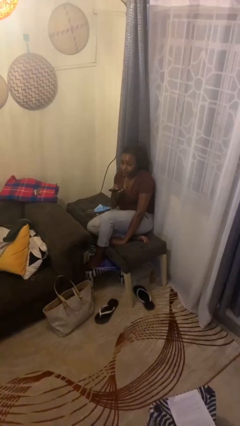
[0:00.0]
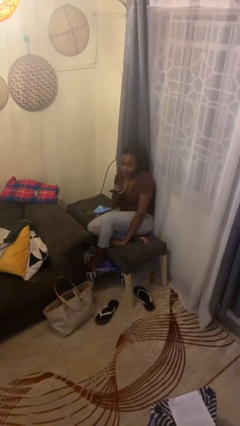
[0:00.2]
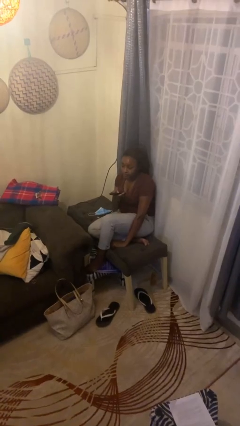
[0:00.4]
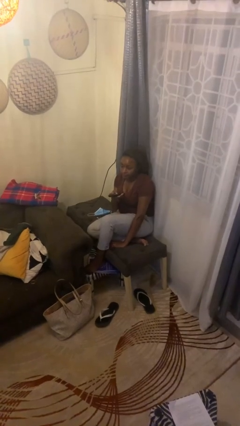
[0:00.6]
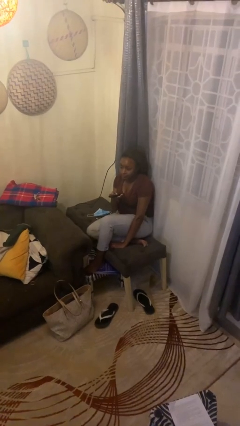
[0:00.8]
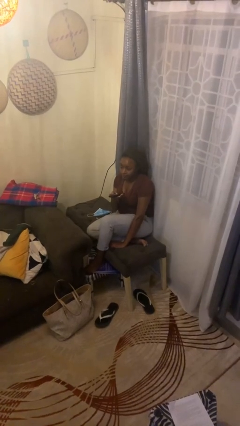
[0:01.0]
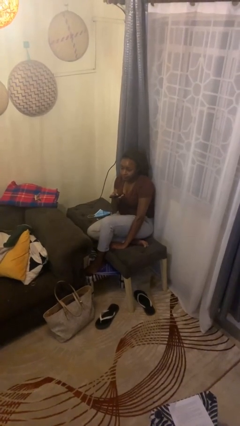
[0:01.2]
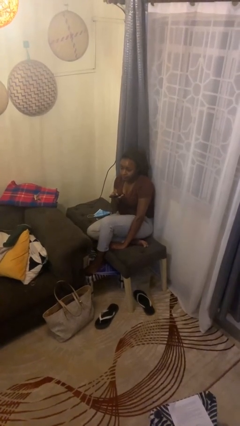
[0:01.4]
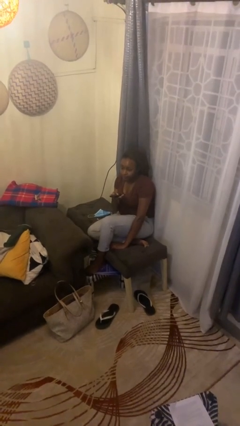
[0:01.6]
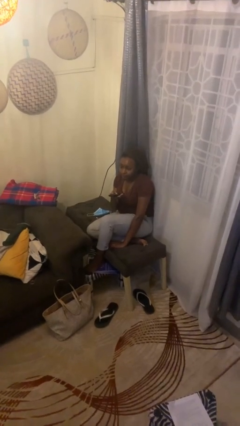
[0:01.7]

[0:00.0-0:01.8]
person uses television remote

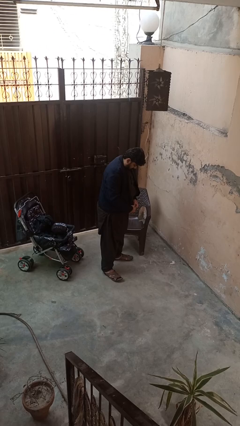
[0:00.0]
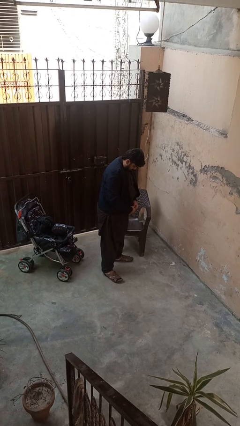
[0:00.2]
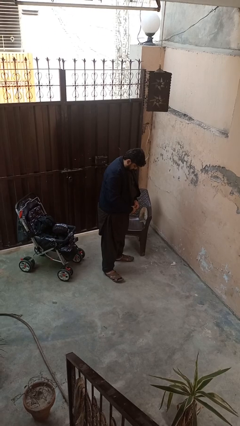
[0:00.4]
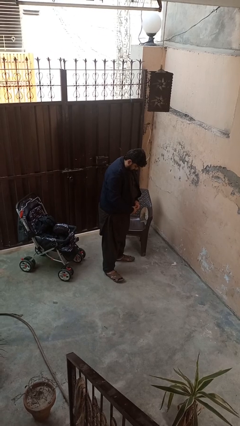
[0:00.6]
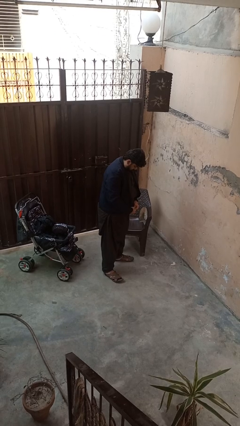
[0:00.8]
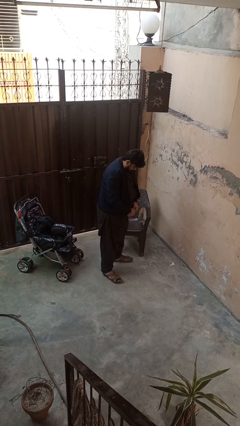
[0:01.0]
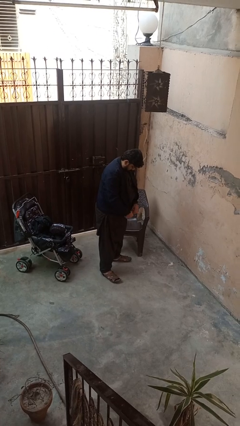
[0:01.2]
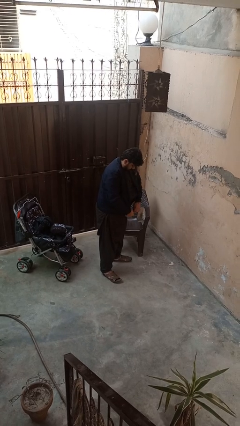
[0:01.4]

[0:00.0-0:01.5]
person zips up jacket

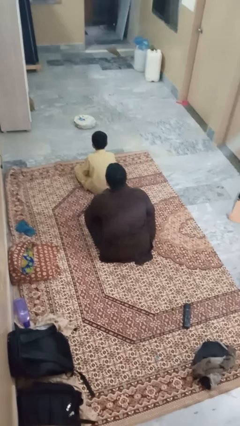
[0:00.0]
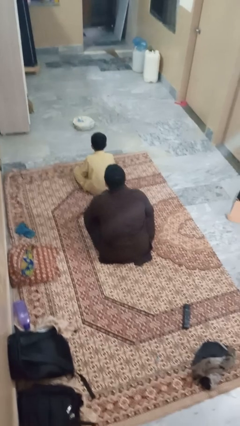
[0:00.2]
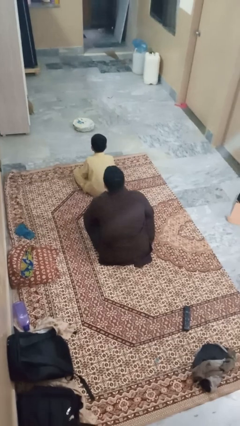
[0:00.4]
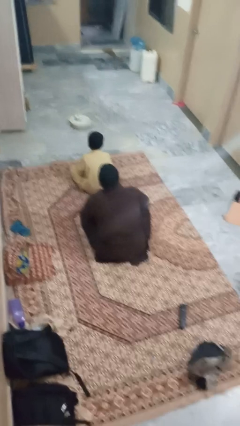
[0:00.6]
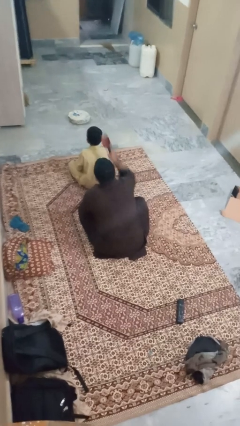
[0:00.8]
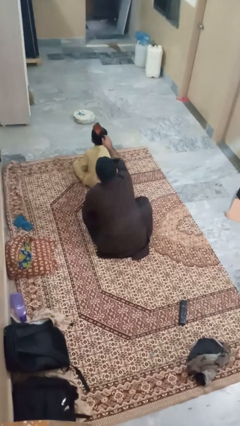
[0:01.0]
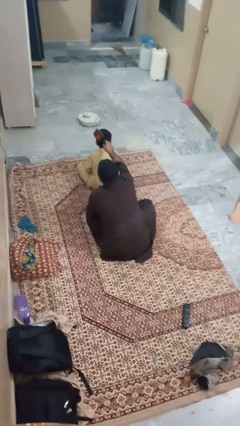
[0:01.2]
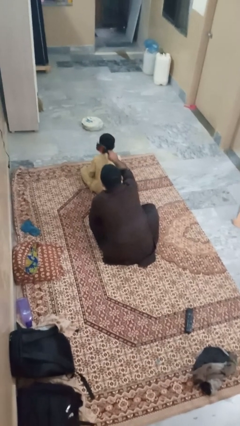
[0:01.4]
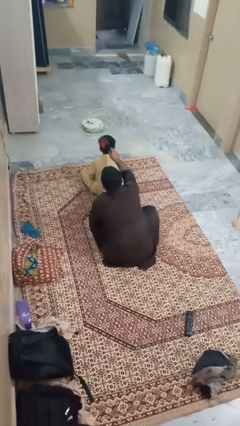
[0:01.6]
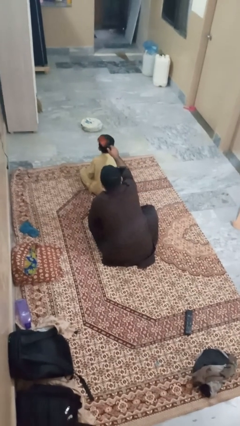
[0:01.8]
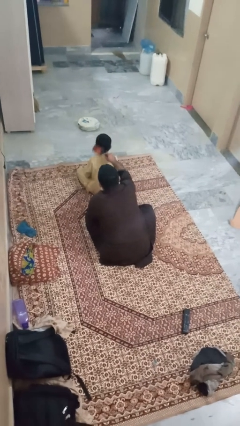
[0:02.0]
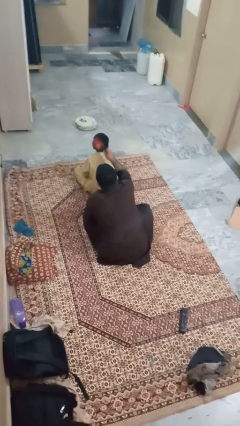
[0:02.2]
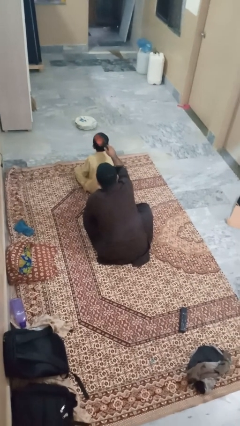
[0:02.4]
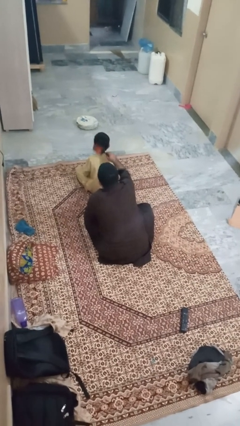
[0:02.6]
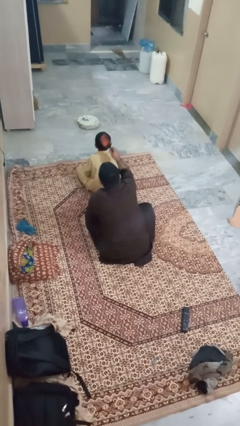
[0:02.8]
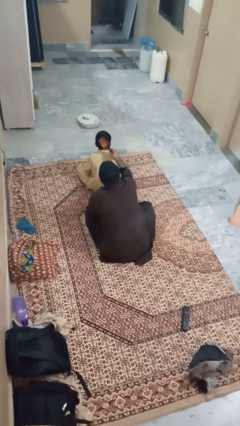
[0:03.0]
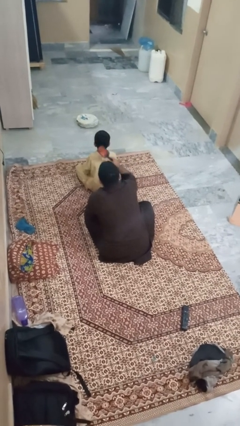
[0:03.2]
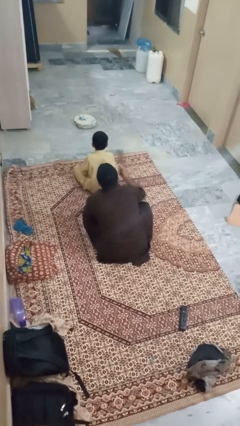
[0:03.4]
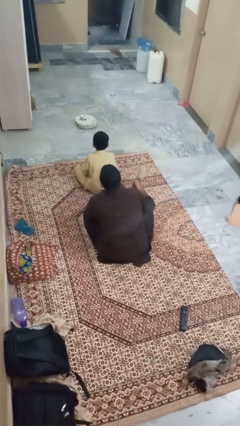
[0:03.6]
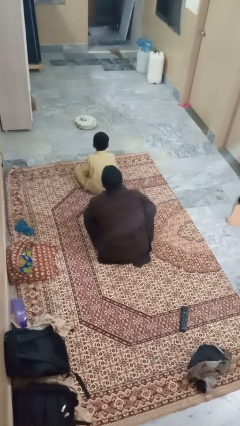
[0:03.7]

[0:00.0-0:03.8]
person brushes hair of person

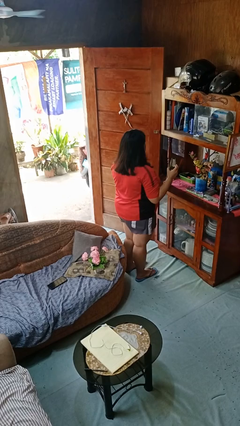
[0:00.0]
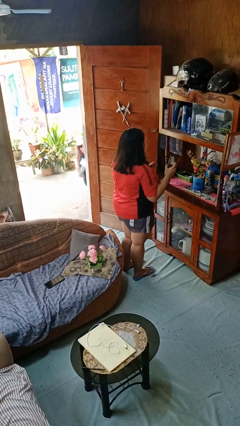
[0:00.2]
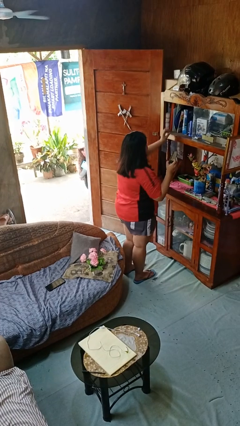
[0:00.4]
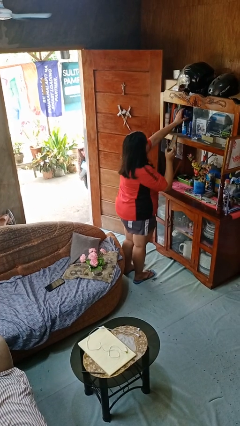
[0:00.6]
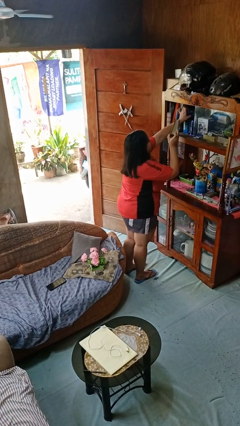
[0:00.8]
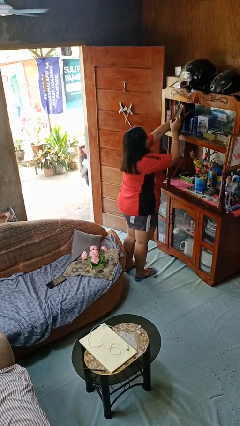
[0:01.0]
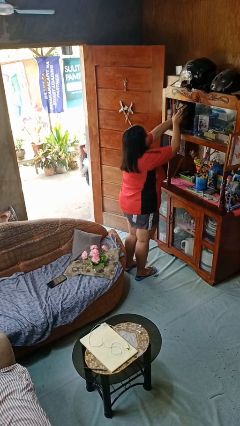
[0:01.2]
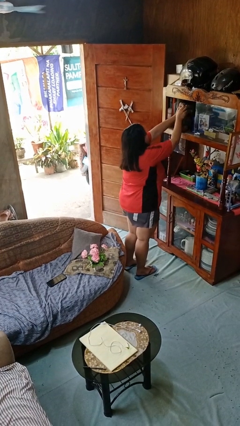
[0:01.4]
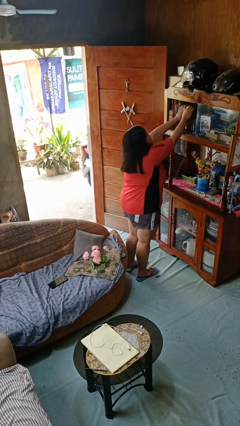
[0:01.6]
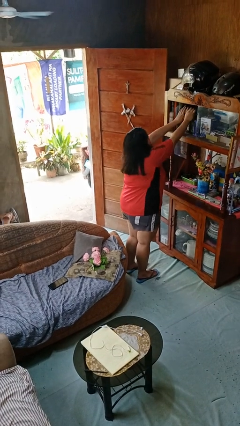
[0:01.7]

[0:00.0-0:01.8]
person puts down object on shelf

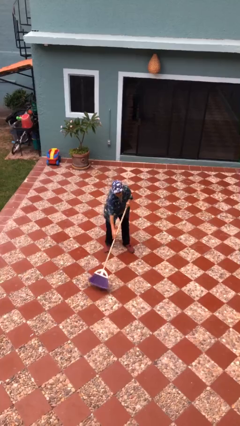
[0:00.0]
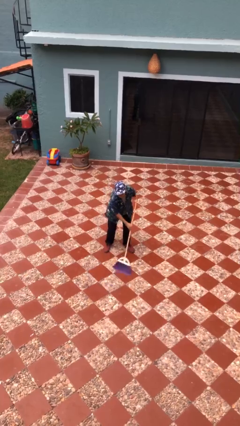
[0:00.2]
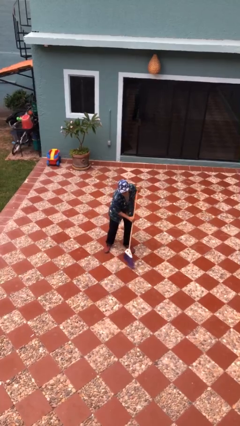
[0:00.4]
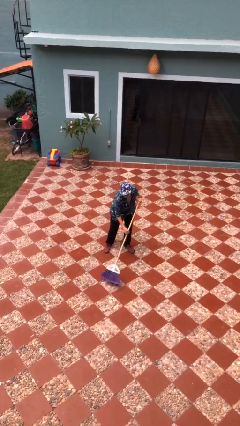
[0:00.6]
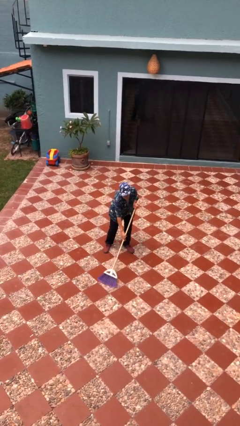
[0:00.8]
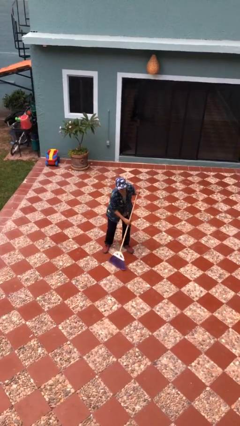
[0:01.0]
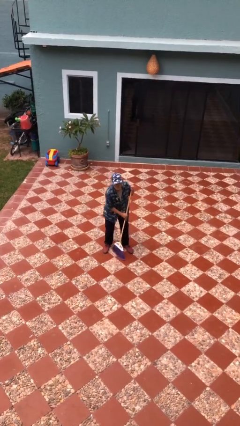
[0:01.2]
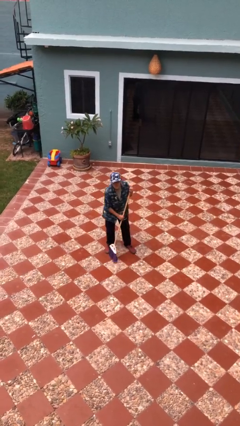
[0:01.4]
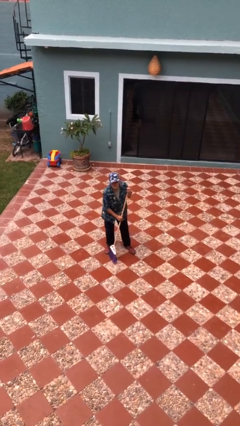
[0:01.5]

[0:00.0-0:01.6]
person sweeps floor

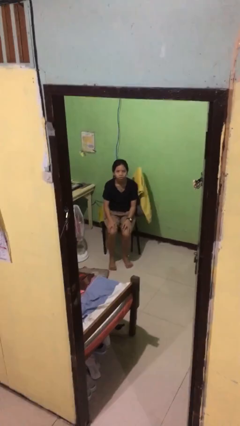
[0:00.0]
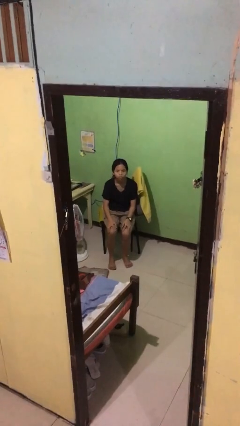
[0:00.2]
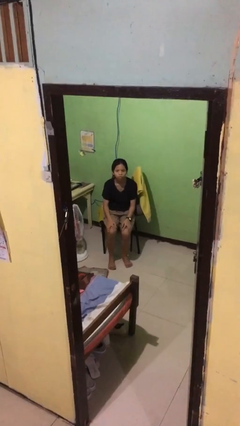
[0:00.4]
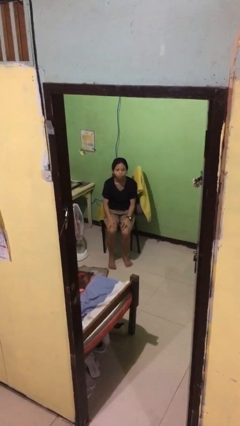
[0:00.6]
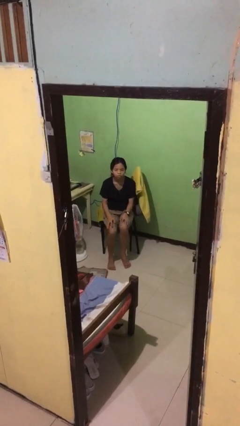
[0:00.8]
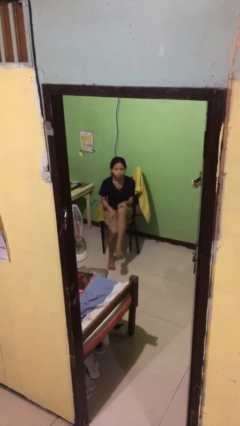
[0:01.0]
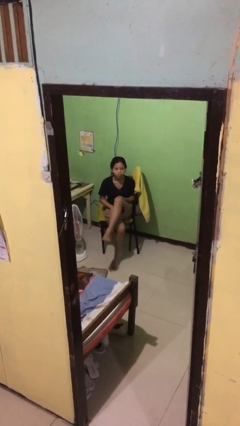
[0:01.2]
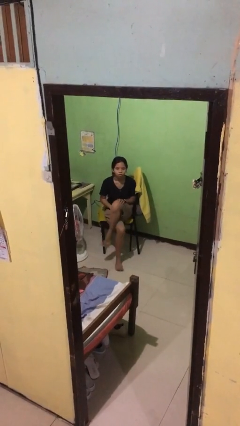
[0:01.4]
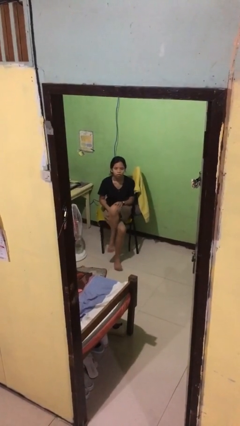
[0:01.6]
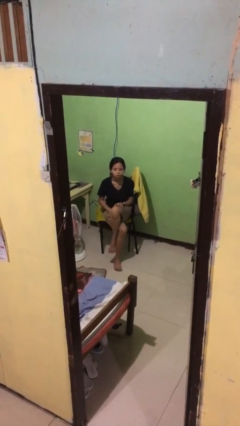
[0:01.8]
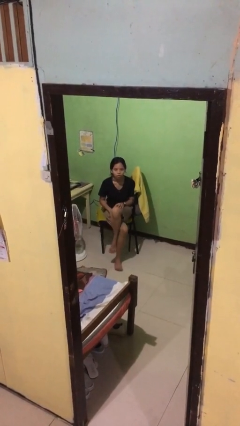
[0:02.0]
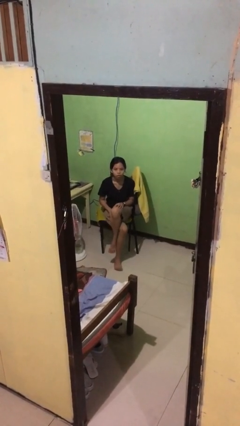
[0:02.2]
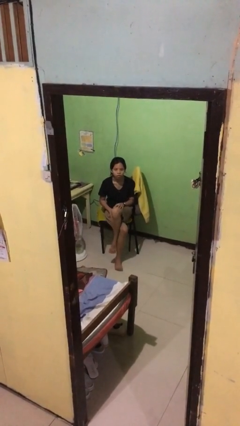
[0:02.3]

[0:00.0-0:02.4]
person crosses legs

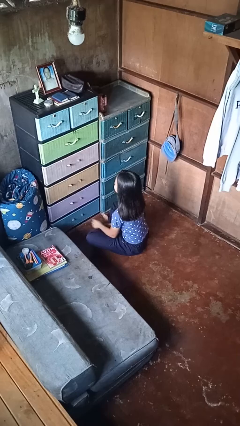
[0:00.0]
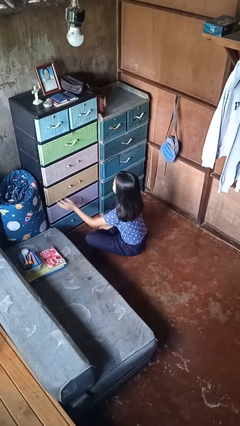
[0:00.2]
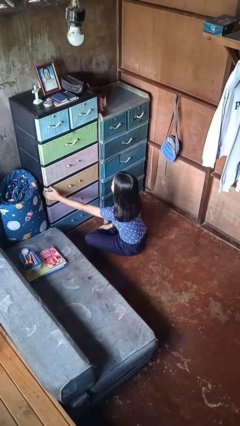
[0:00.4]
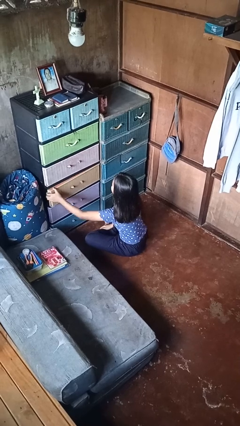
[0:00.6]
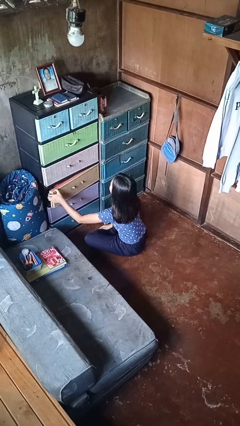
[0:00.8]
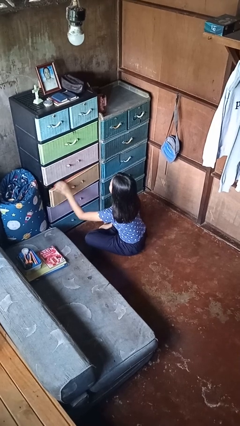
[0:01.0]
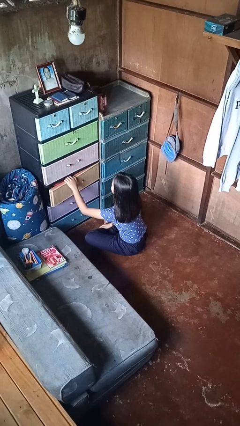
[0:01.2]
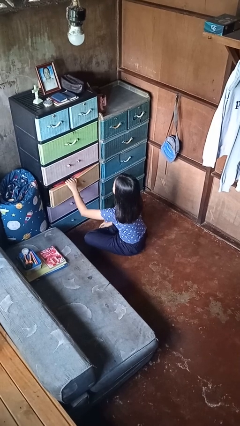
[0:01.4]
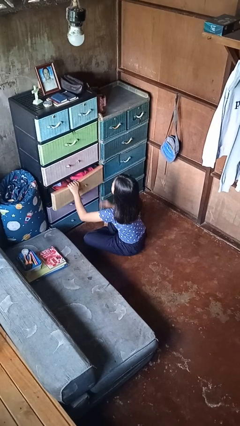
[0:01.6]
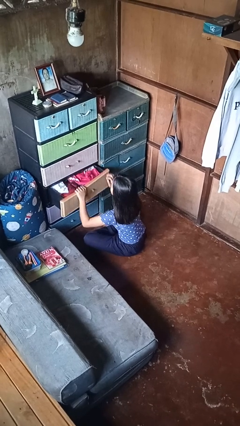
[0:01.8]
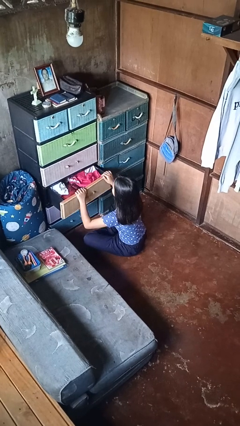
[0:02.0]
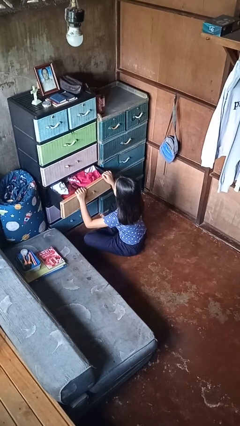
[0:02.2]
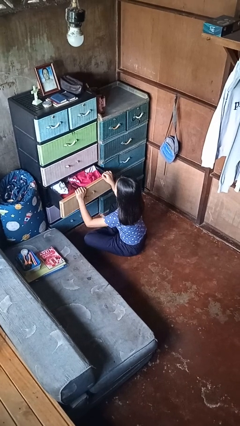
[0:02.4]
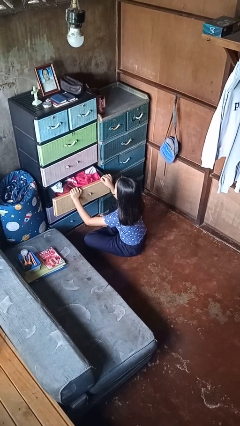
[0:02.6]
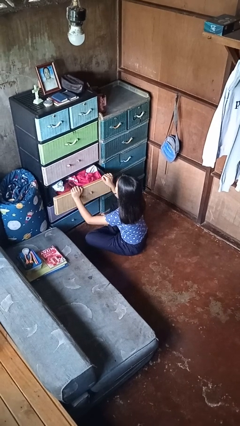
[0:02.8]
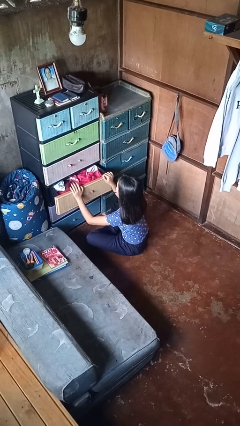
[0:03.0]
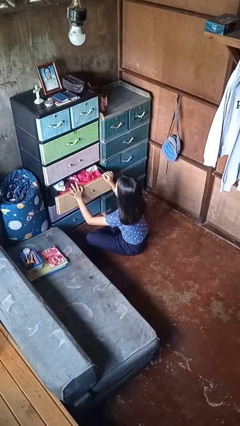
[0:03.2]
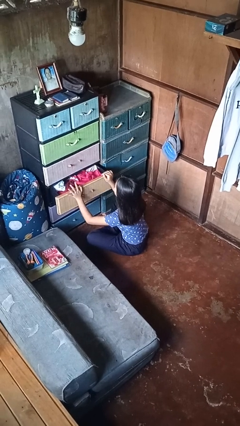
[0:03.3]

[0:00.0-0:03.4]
person opens dresser drawer

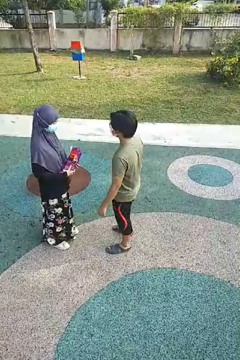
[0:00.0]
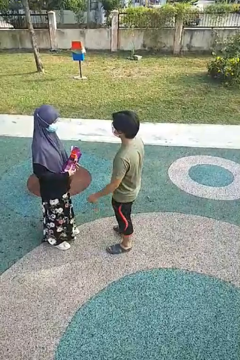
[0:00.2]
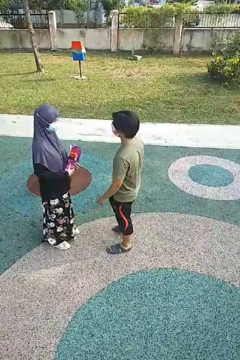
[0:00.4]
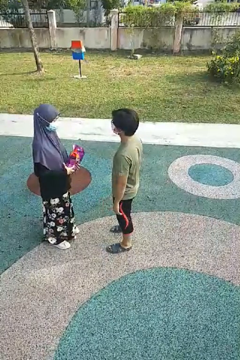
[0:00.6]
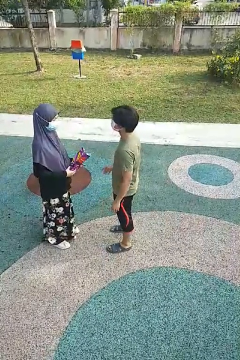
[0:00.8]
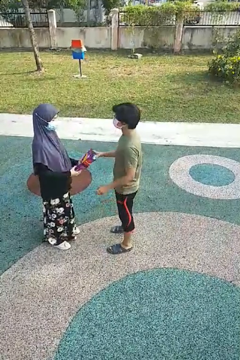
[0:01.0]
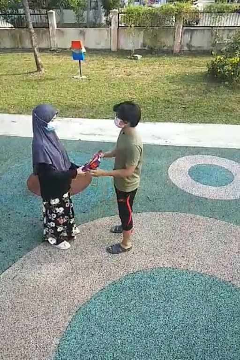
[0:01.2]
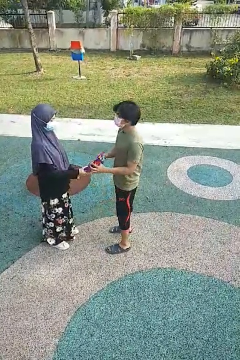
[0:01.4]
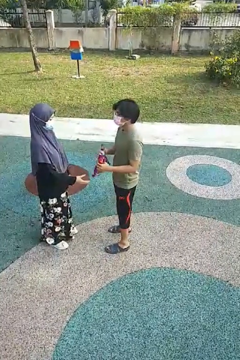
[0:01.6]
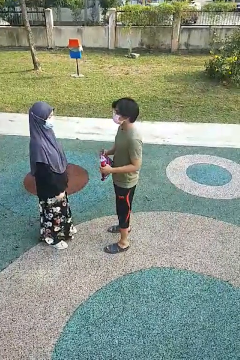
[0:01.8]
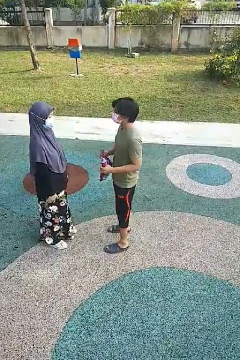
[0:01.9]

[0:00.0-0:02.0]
person transfers object to person
